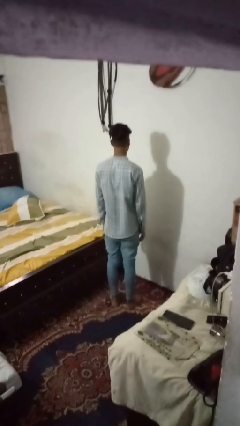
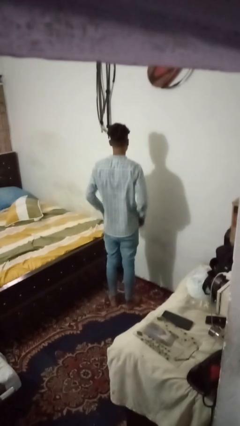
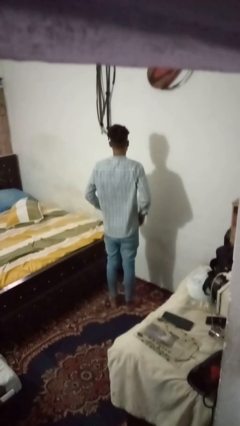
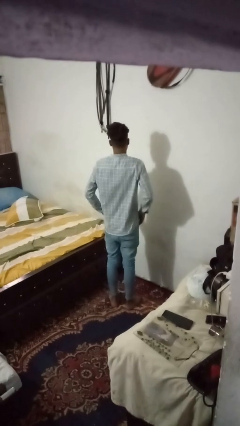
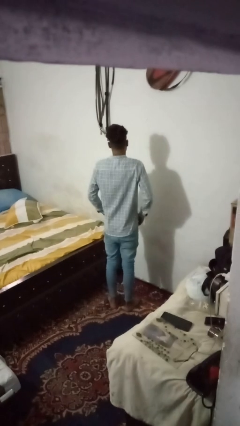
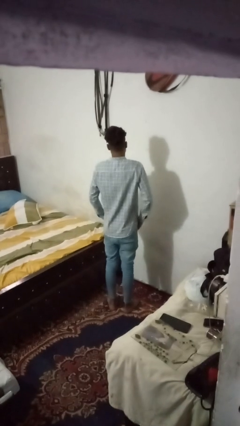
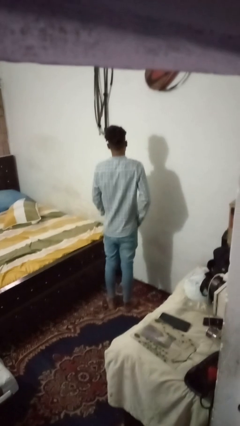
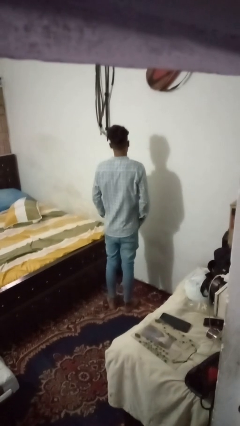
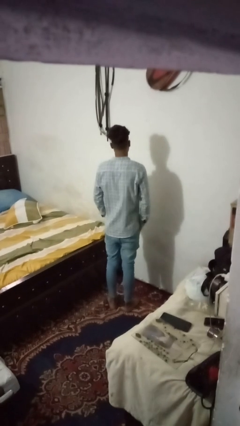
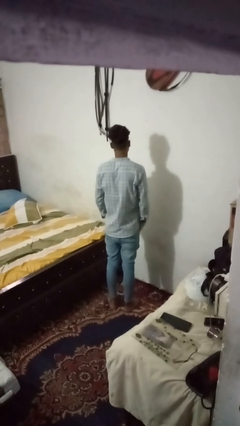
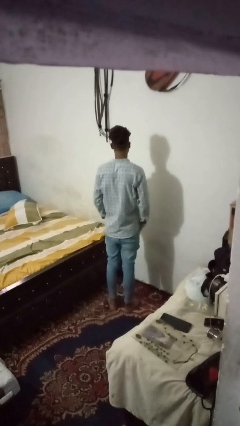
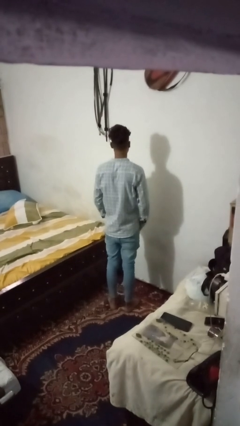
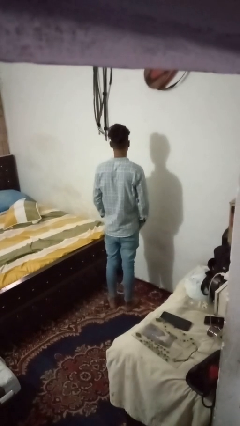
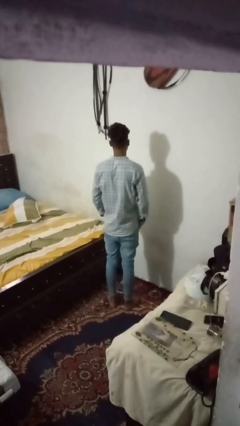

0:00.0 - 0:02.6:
person puts hands in back pockets

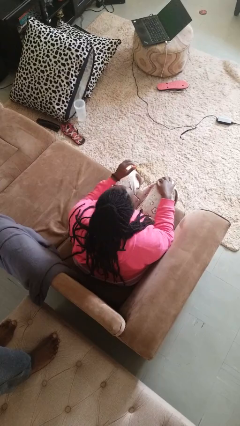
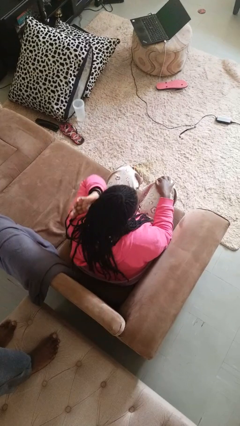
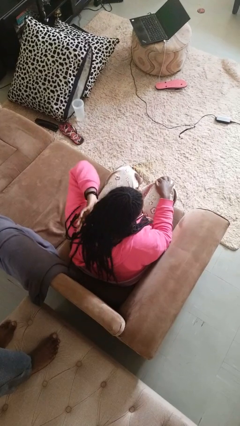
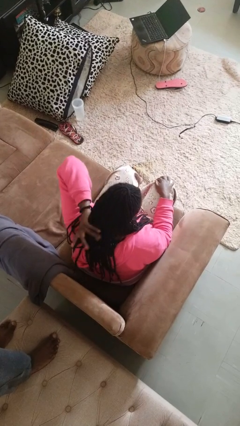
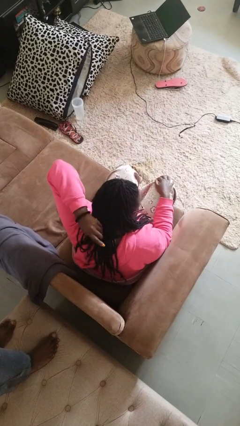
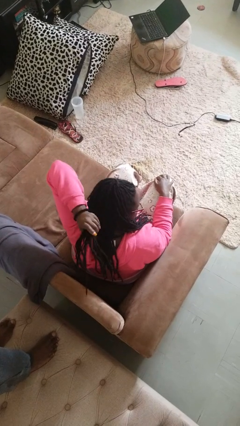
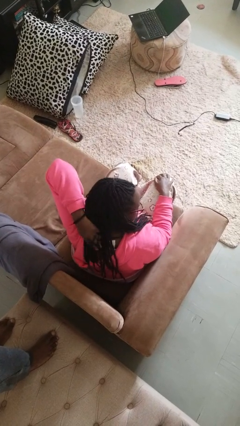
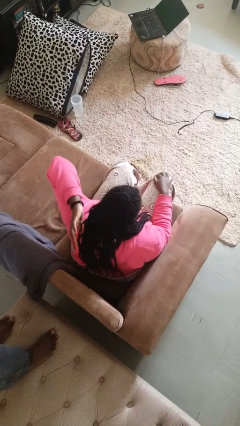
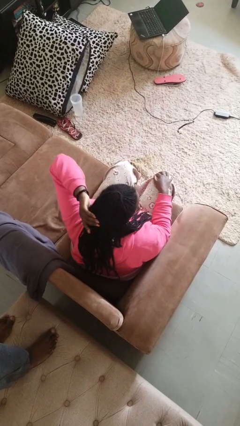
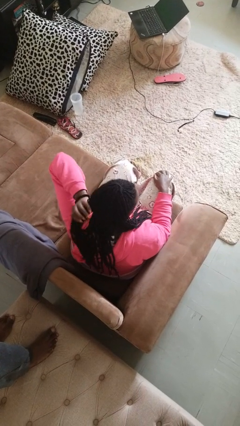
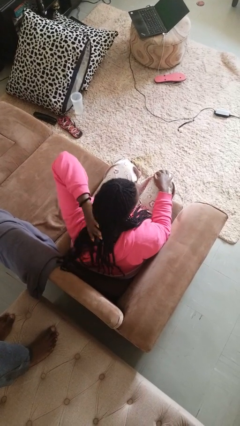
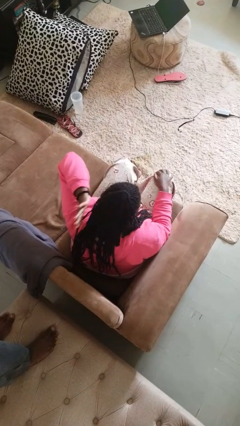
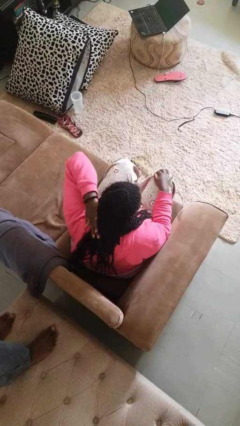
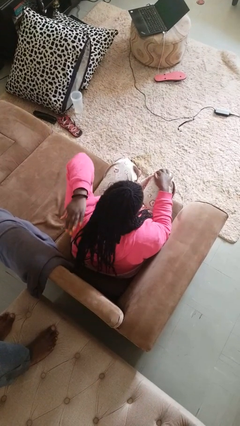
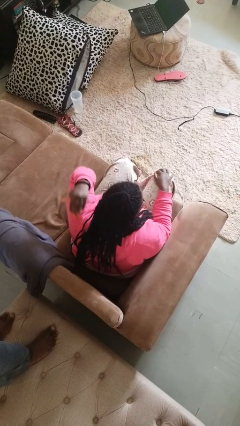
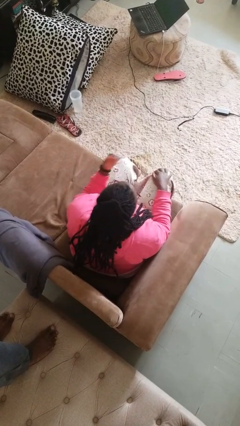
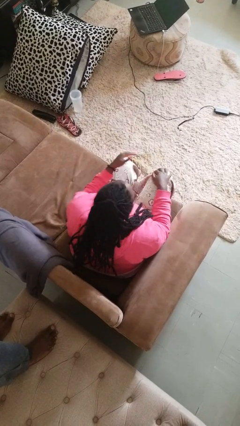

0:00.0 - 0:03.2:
person strokes hair

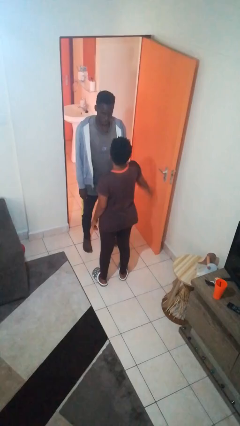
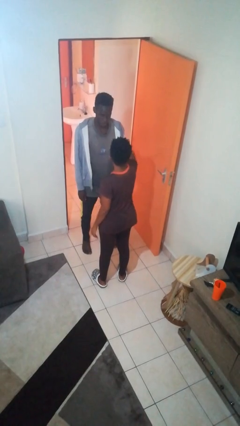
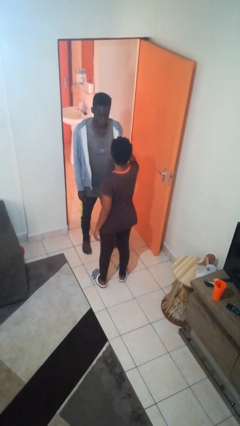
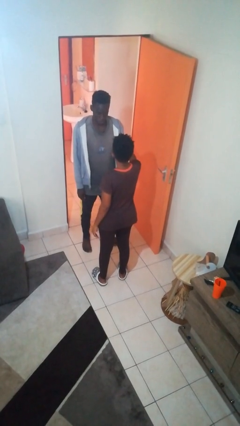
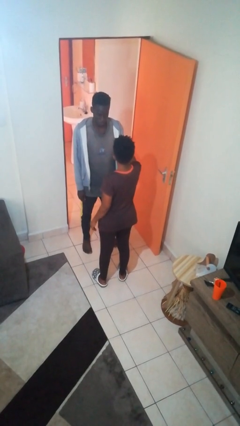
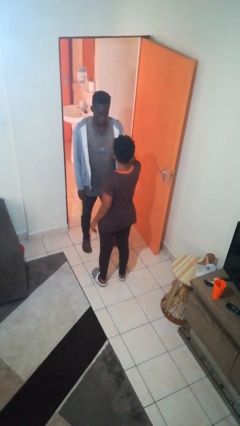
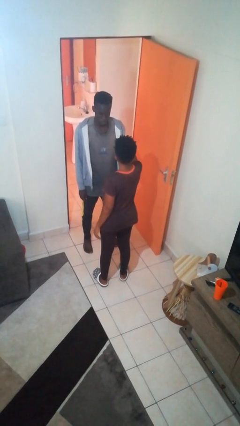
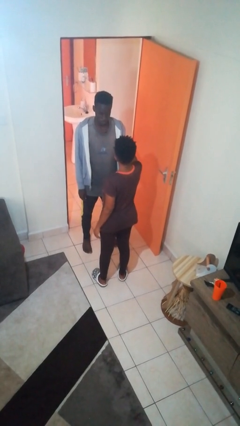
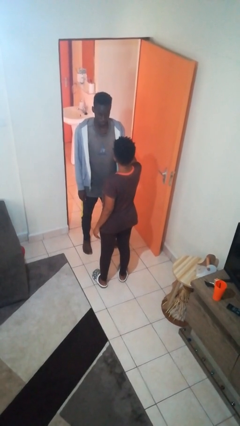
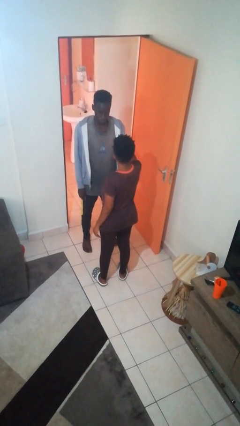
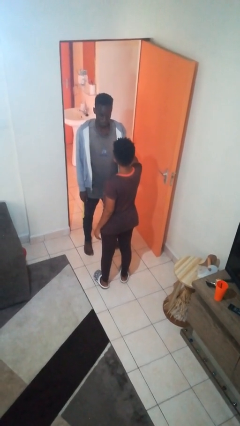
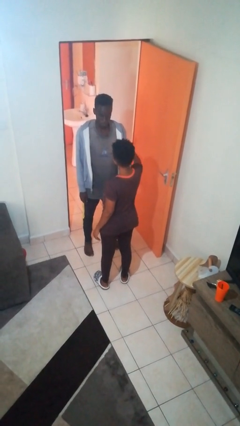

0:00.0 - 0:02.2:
person grabs person by bicep

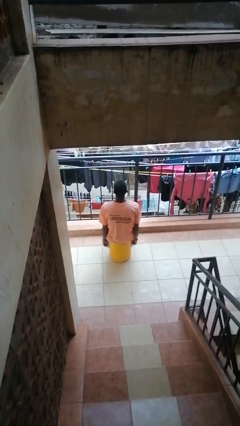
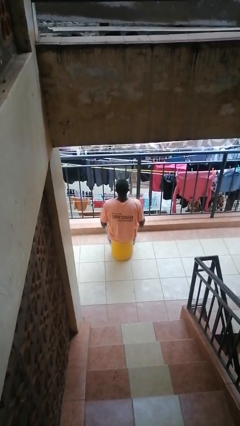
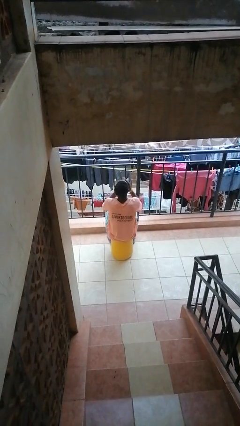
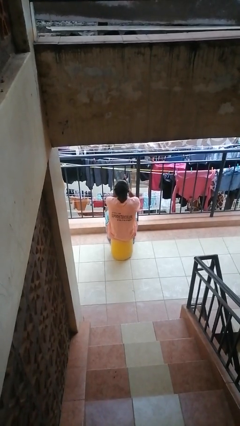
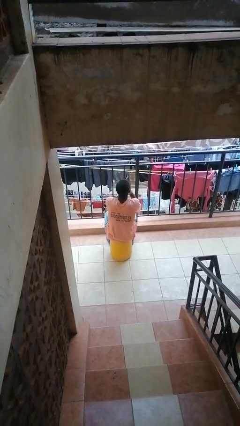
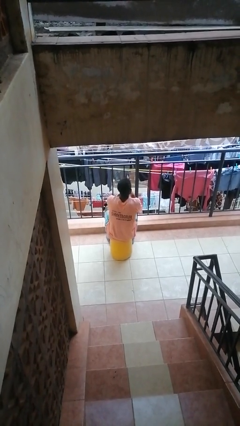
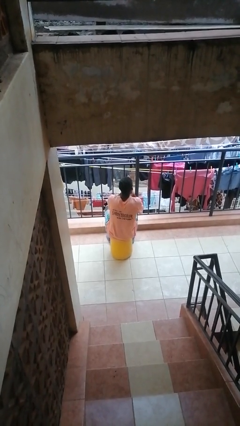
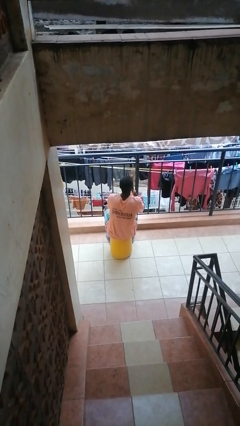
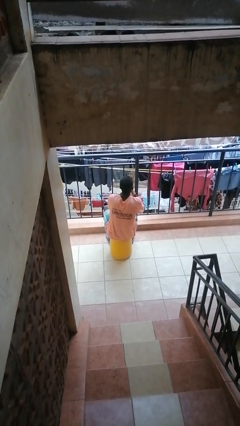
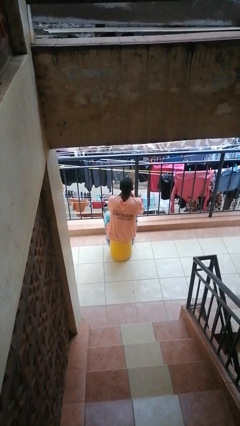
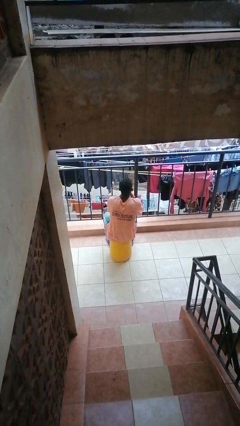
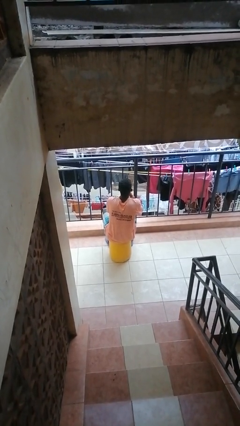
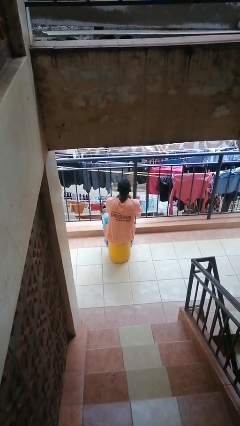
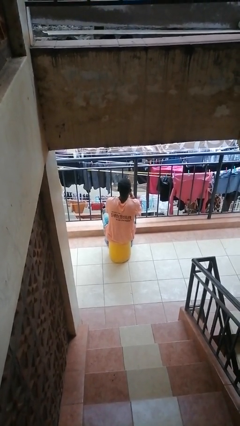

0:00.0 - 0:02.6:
person blows into hands

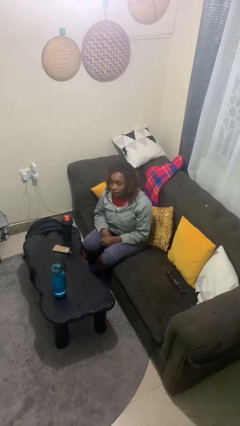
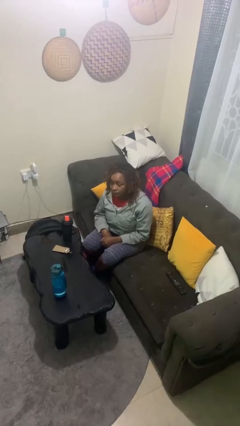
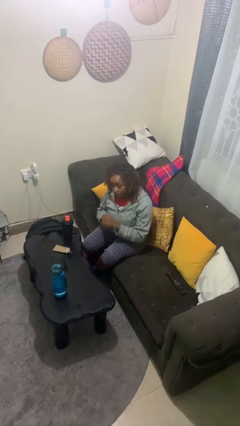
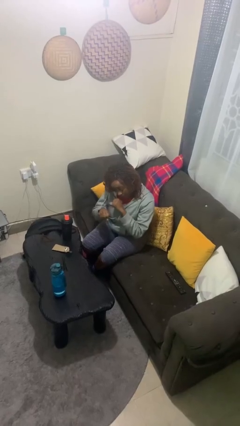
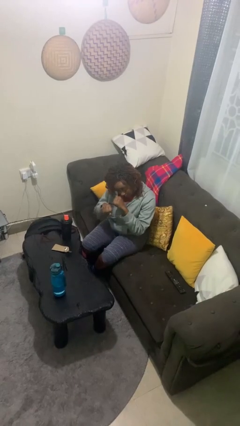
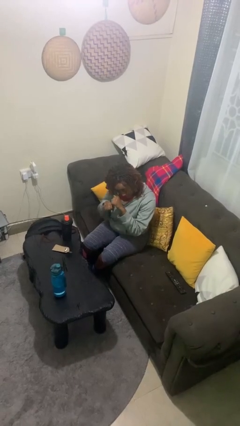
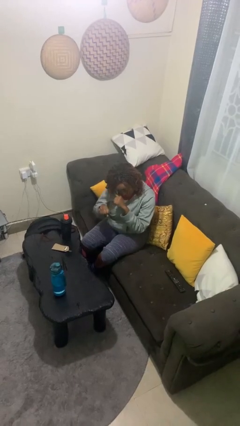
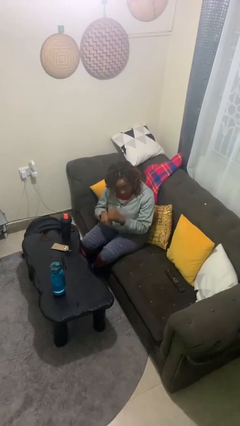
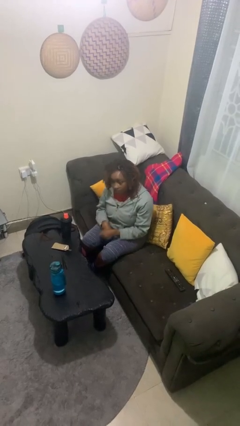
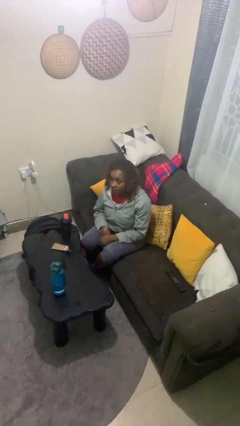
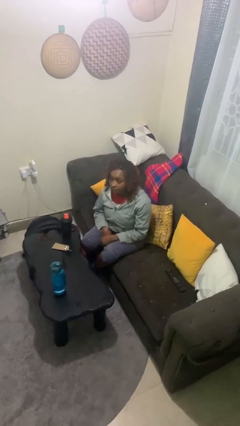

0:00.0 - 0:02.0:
person punches

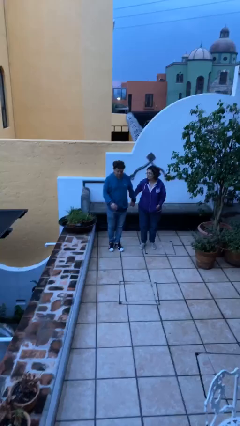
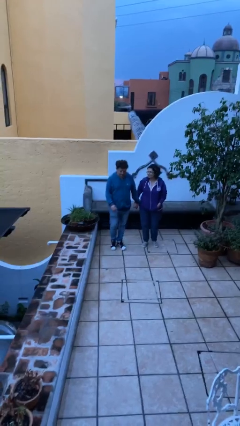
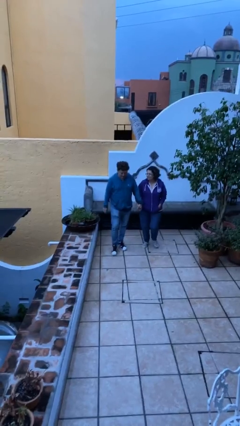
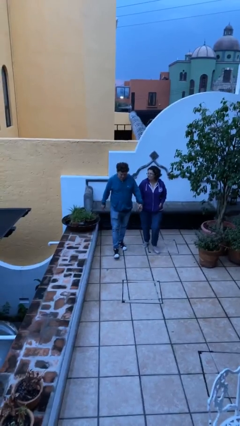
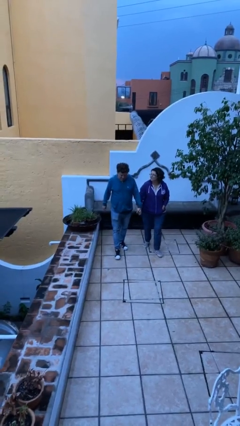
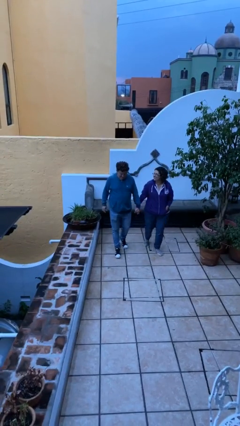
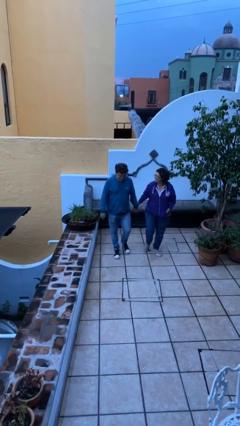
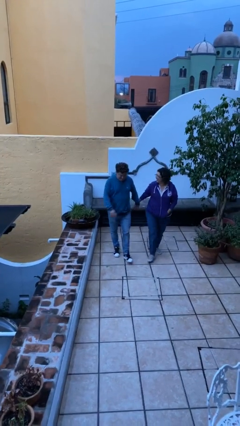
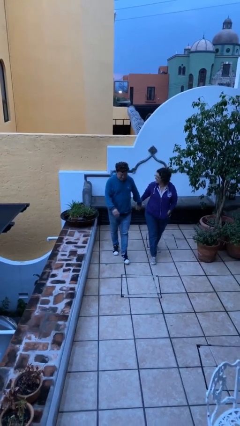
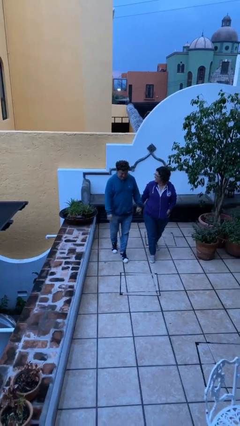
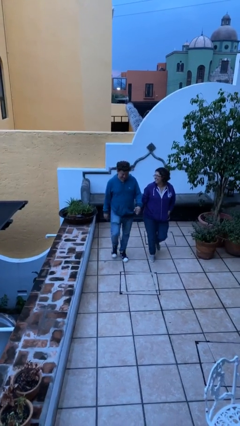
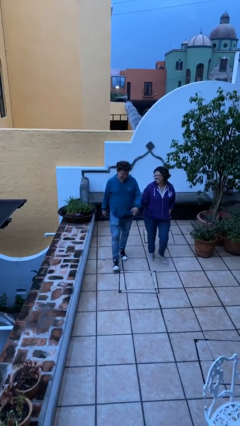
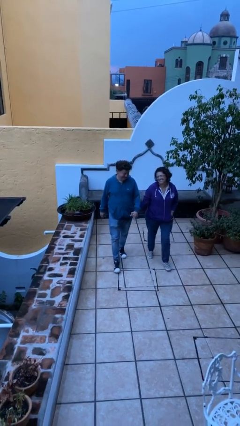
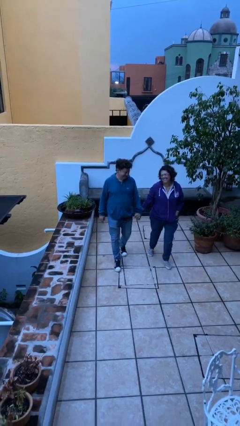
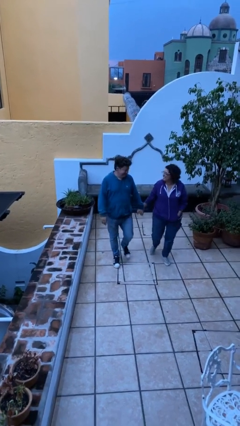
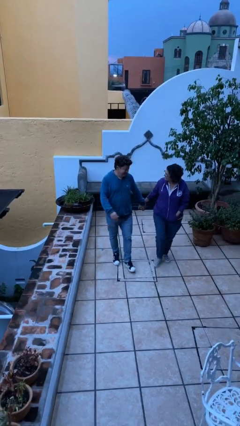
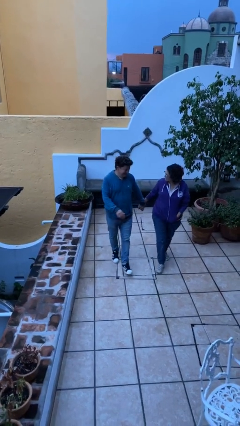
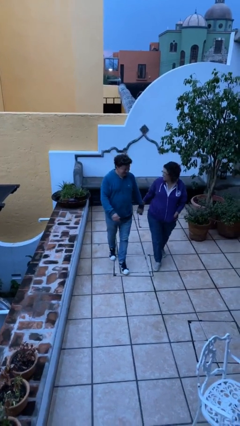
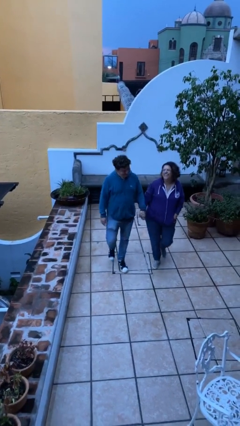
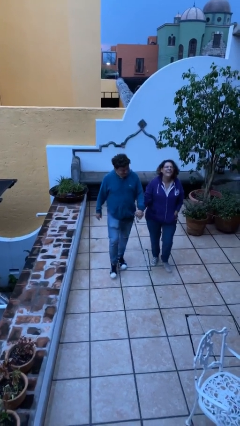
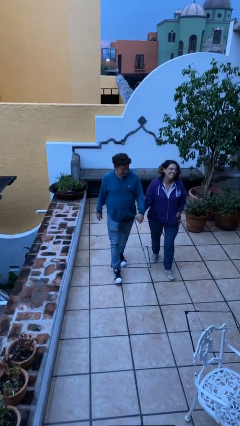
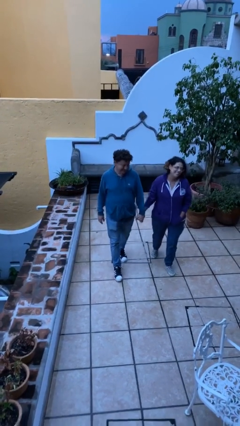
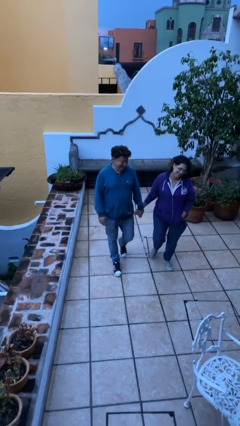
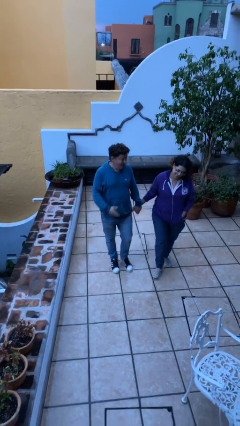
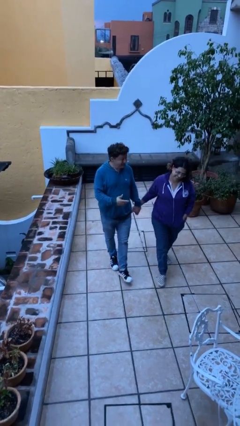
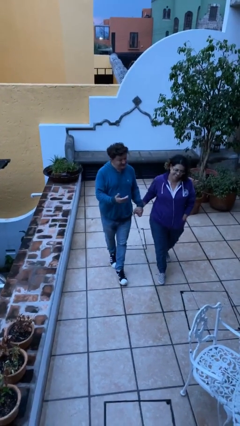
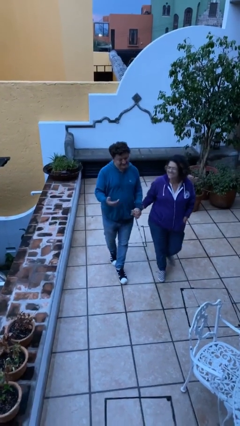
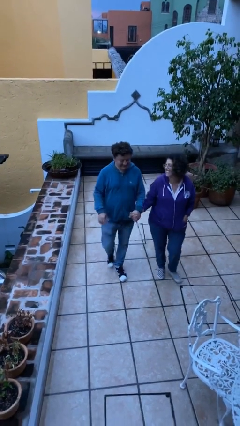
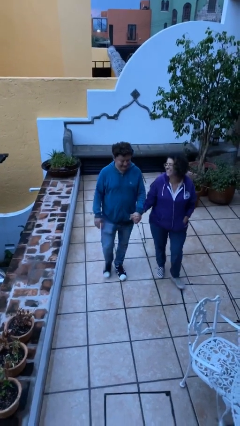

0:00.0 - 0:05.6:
person holds hand
